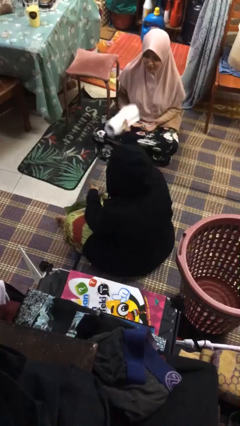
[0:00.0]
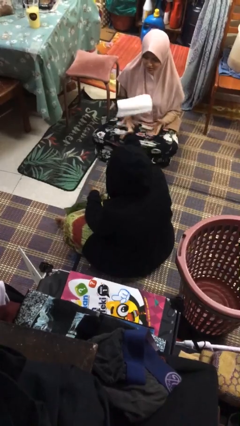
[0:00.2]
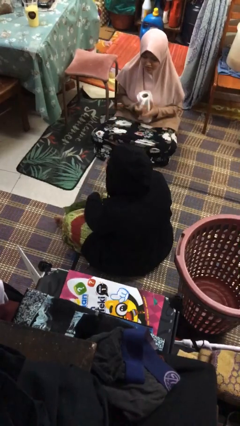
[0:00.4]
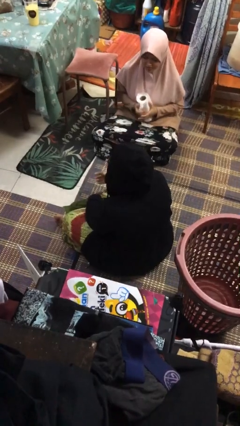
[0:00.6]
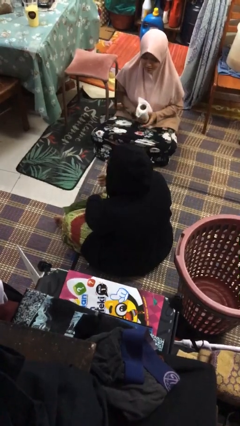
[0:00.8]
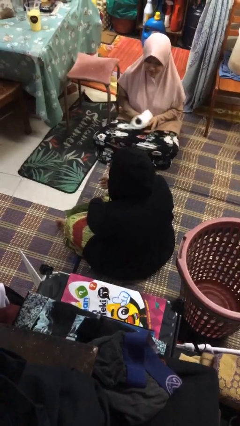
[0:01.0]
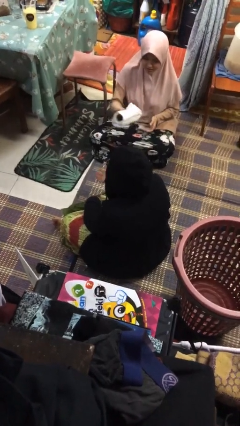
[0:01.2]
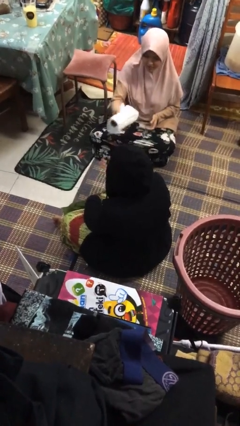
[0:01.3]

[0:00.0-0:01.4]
person throws object to person

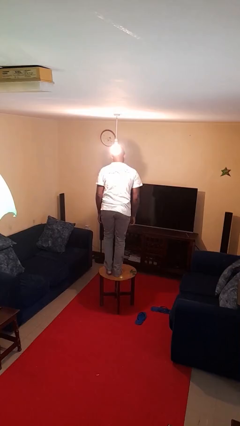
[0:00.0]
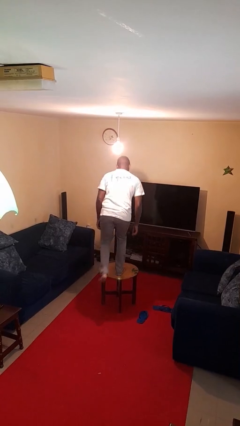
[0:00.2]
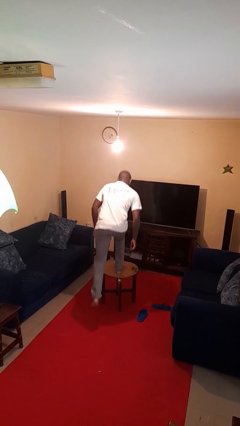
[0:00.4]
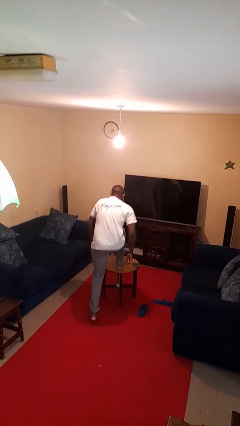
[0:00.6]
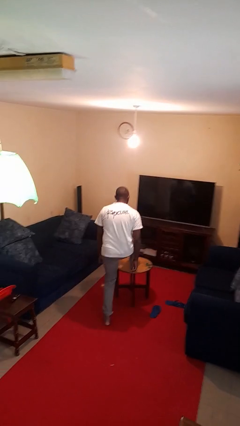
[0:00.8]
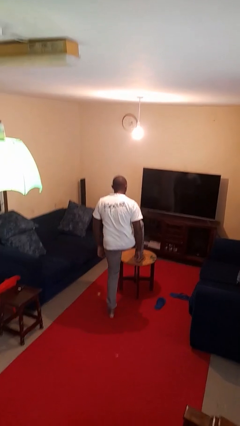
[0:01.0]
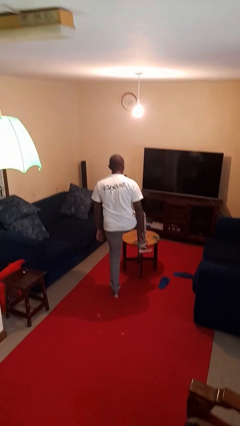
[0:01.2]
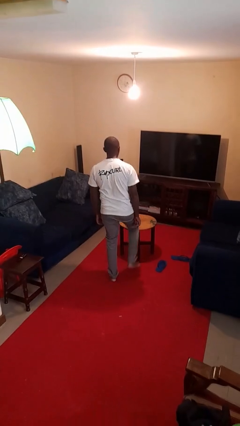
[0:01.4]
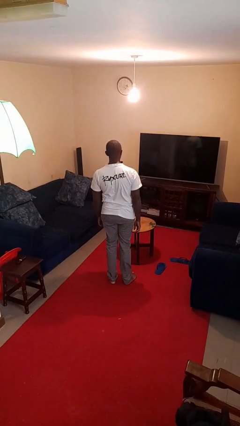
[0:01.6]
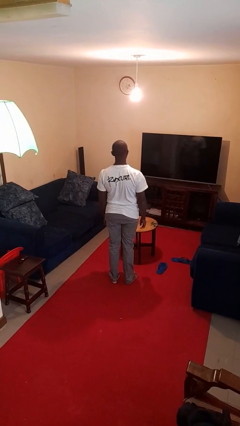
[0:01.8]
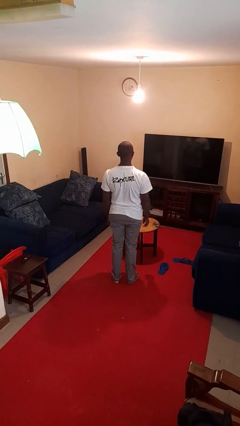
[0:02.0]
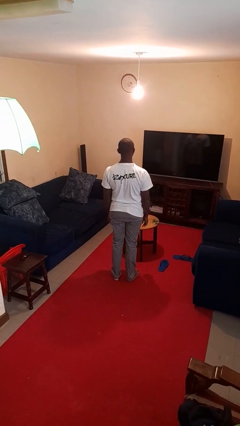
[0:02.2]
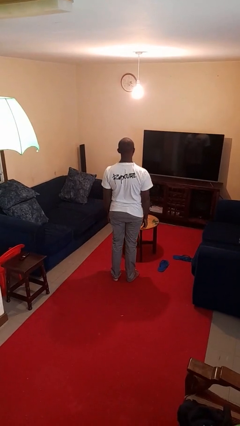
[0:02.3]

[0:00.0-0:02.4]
person climbs off table

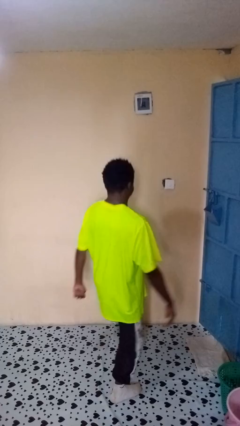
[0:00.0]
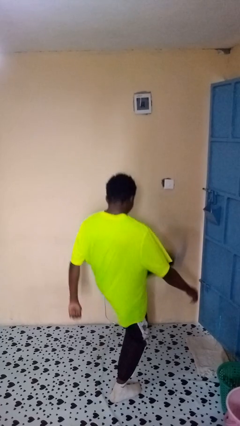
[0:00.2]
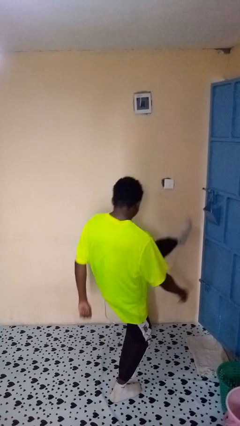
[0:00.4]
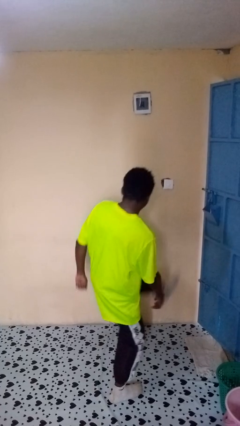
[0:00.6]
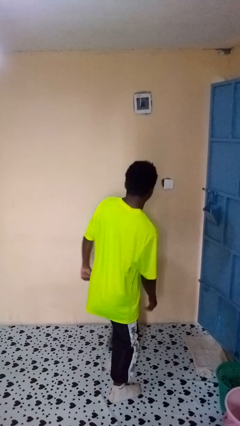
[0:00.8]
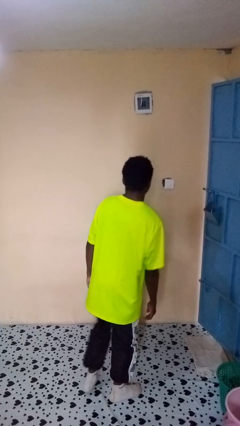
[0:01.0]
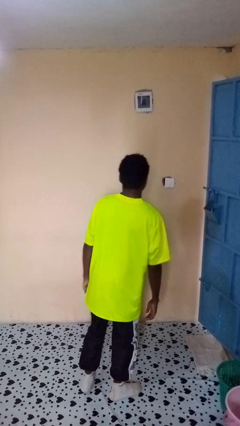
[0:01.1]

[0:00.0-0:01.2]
person karate kicks

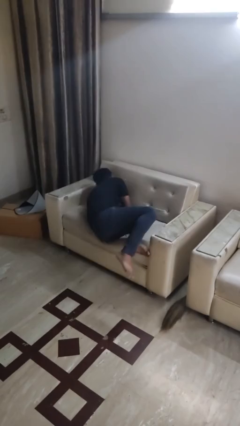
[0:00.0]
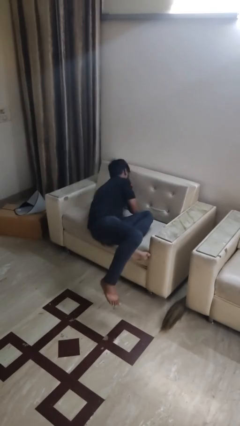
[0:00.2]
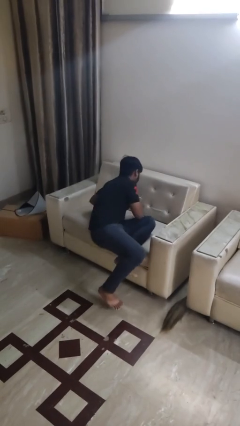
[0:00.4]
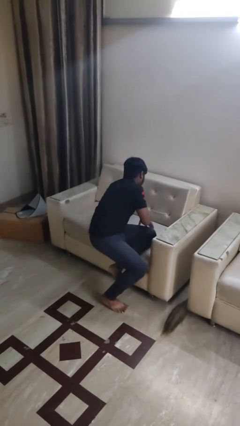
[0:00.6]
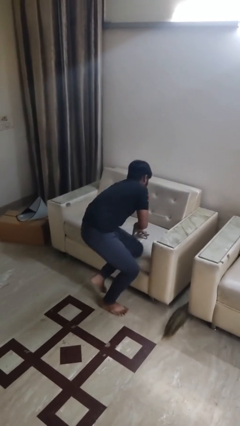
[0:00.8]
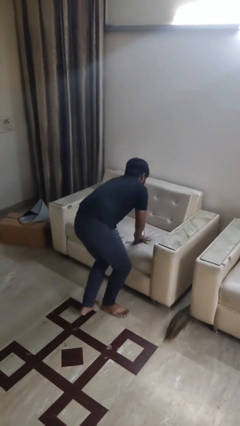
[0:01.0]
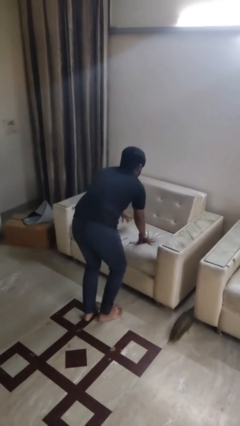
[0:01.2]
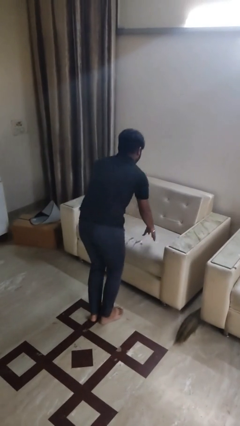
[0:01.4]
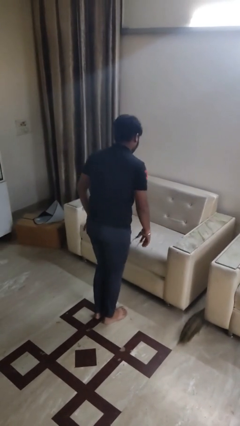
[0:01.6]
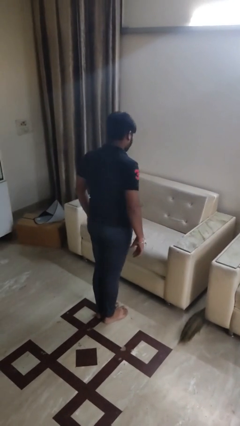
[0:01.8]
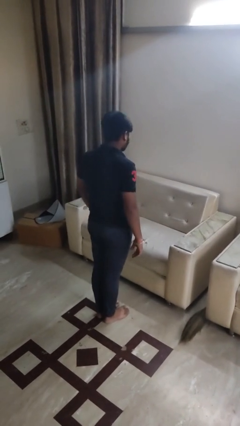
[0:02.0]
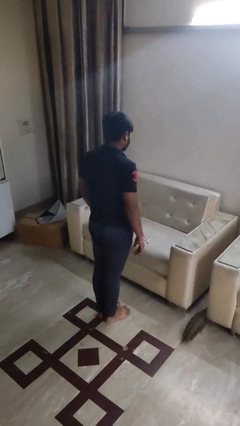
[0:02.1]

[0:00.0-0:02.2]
person stands up

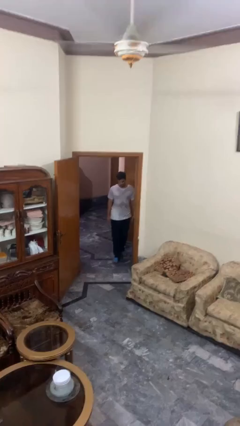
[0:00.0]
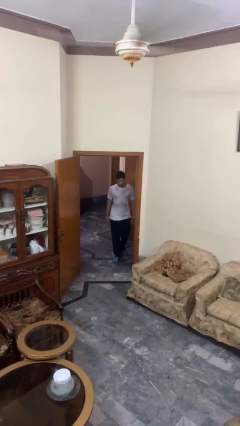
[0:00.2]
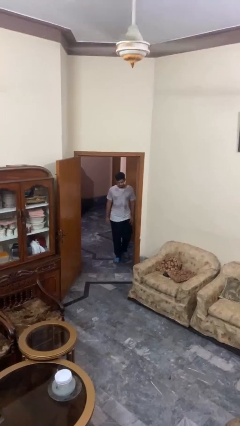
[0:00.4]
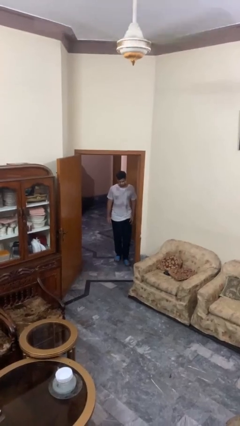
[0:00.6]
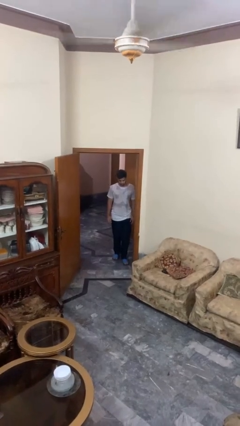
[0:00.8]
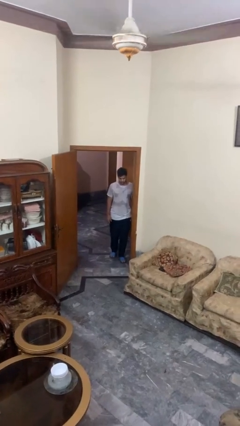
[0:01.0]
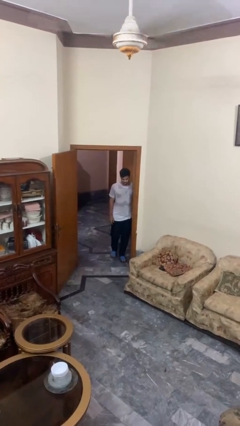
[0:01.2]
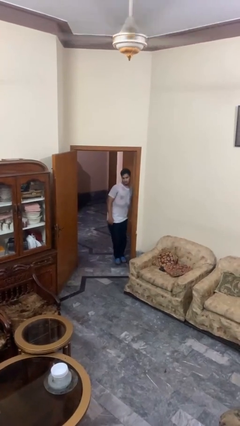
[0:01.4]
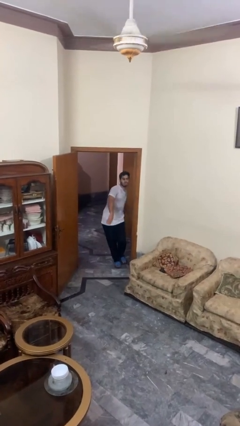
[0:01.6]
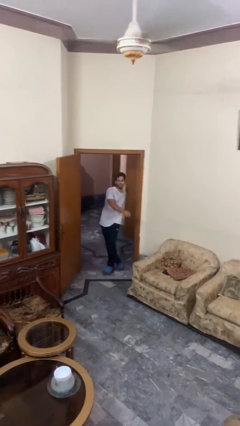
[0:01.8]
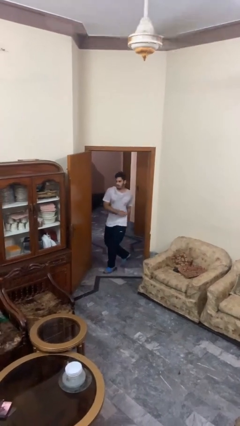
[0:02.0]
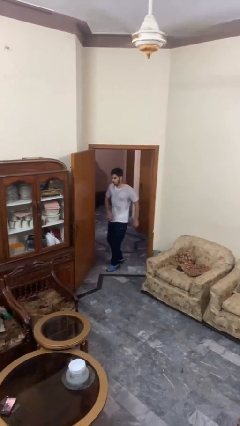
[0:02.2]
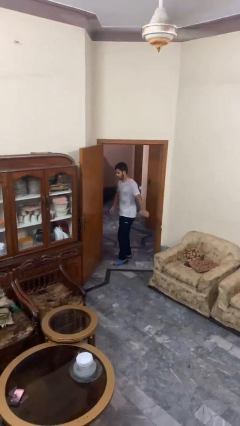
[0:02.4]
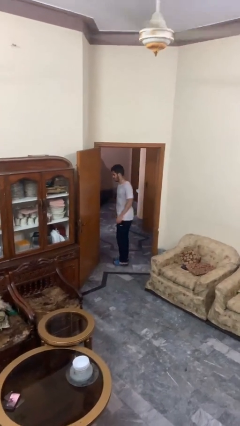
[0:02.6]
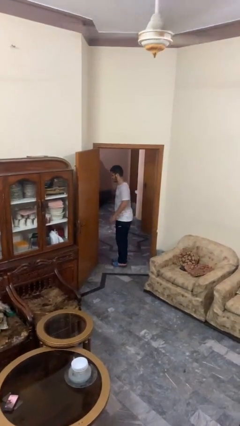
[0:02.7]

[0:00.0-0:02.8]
person bumps into wall

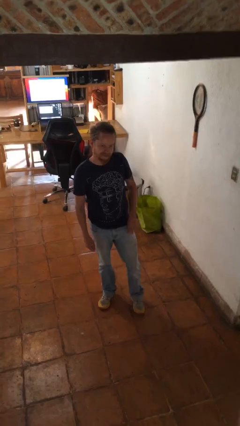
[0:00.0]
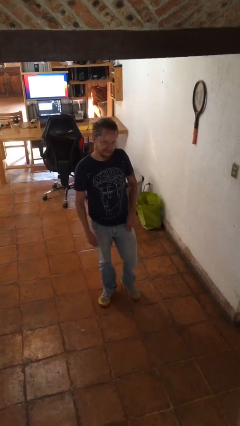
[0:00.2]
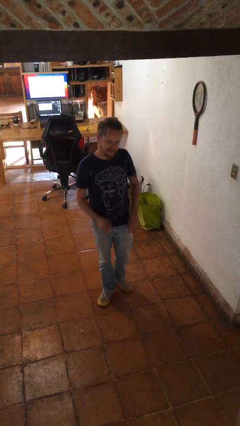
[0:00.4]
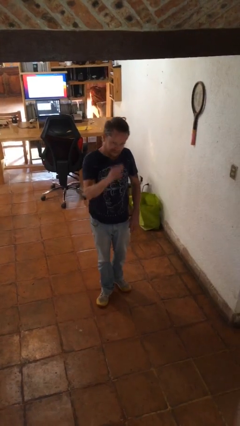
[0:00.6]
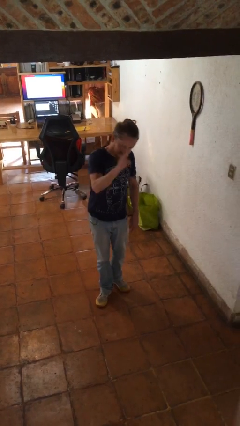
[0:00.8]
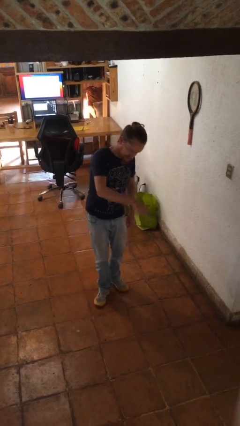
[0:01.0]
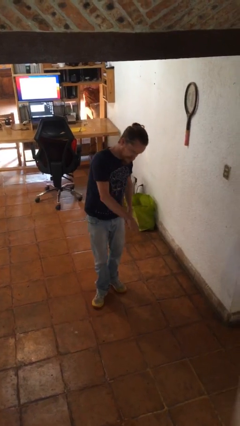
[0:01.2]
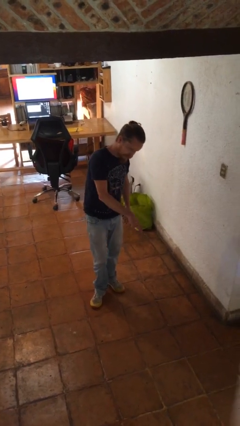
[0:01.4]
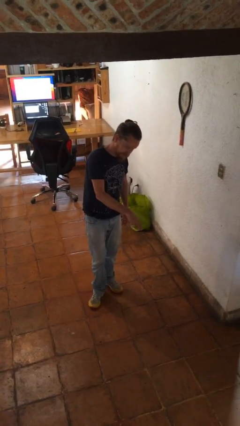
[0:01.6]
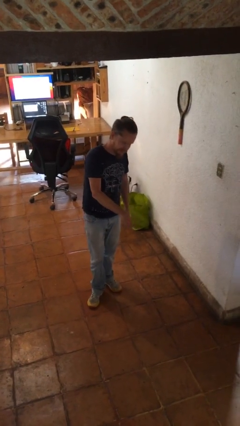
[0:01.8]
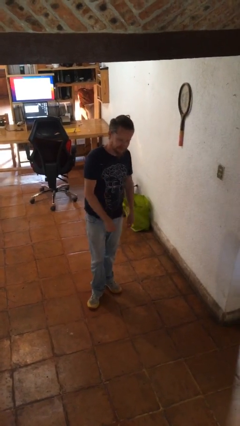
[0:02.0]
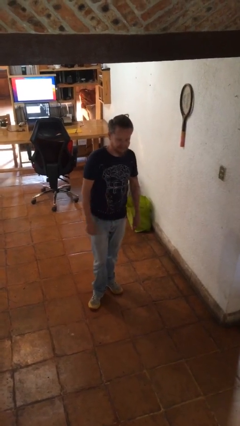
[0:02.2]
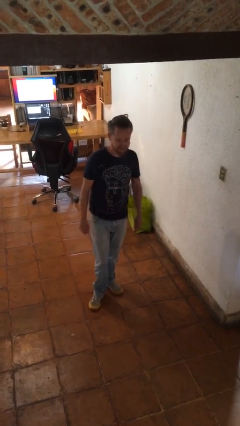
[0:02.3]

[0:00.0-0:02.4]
person gestures swipe down

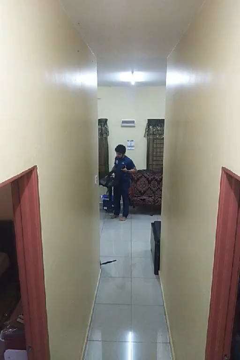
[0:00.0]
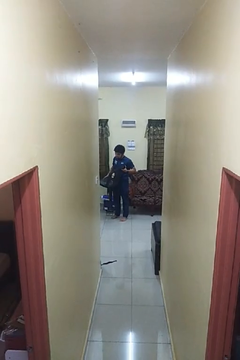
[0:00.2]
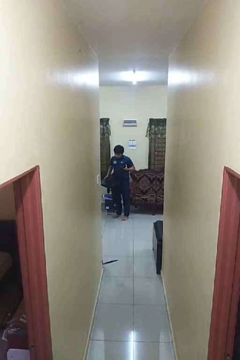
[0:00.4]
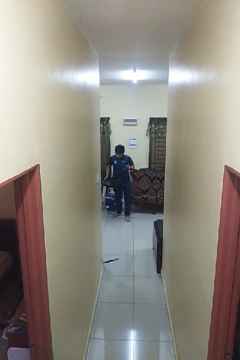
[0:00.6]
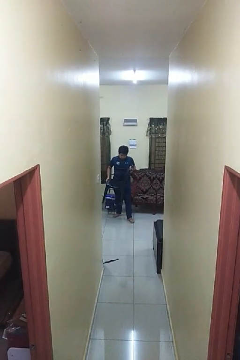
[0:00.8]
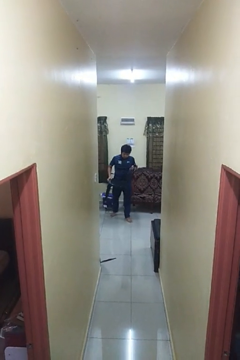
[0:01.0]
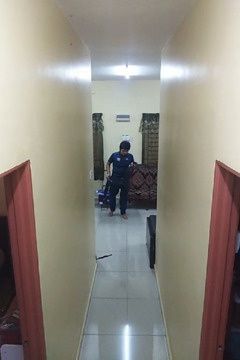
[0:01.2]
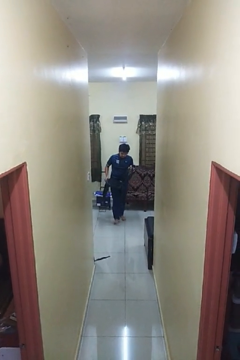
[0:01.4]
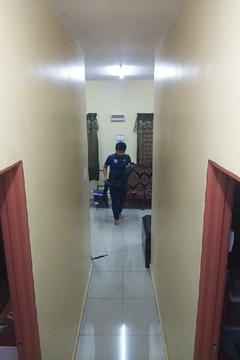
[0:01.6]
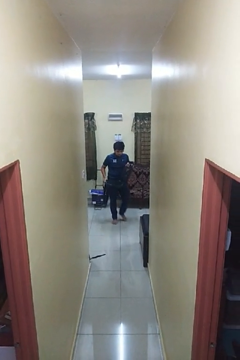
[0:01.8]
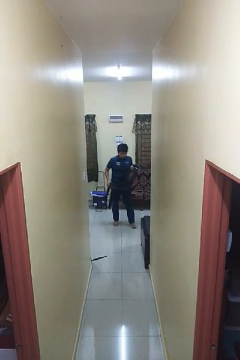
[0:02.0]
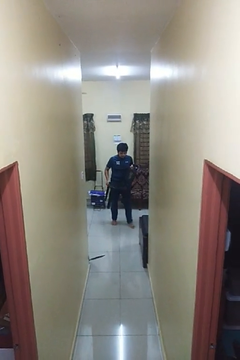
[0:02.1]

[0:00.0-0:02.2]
person carries furniture

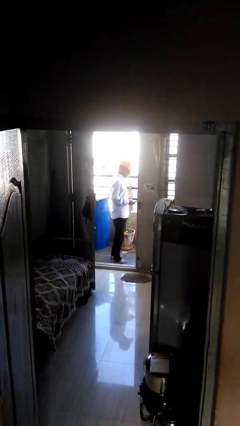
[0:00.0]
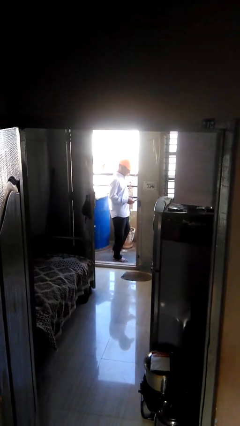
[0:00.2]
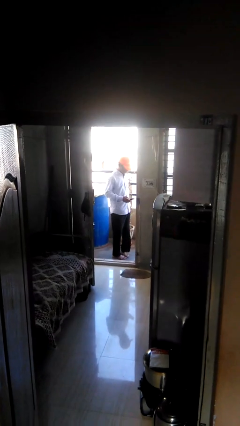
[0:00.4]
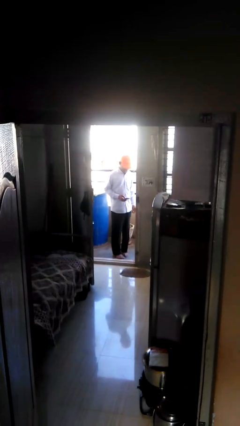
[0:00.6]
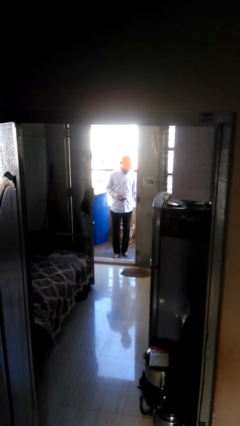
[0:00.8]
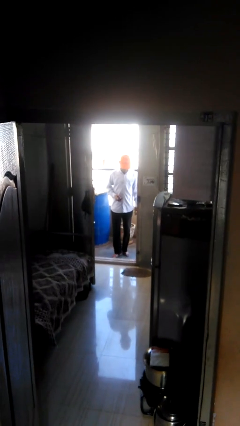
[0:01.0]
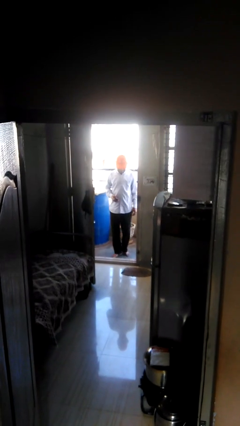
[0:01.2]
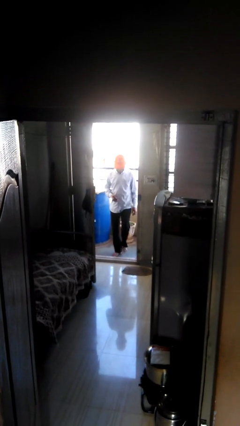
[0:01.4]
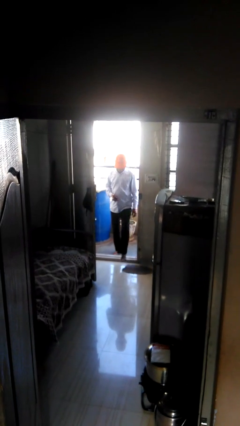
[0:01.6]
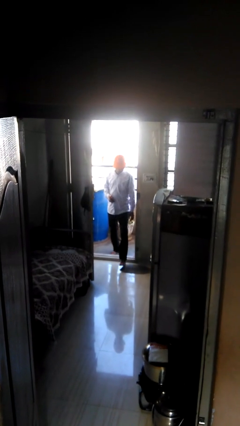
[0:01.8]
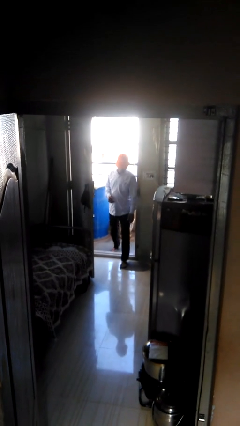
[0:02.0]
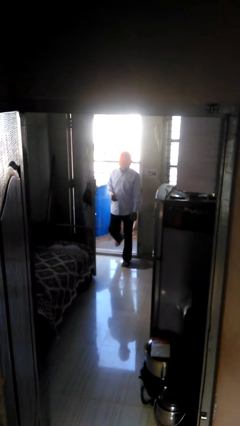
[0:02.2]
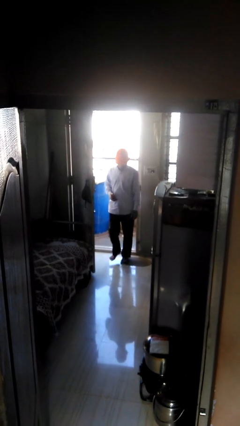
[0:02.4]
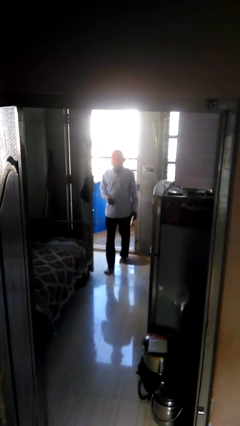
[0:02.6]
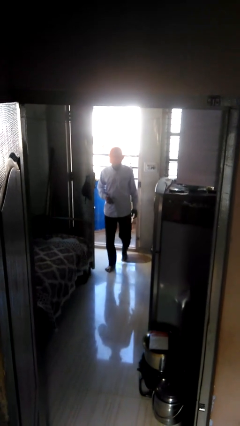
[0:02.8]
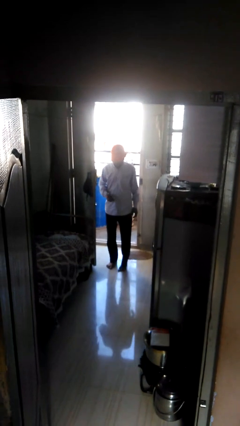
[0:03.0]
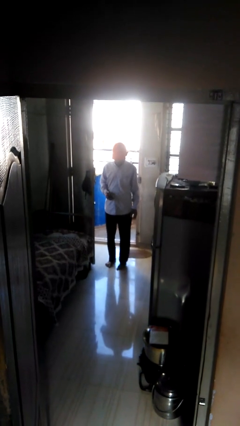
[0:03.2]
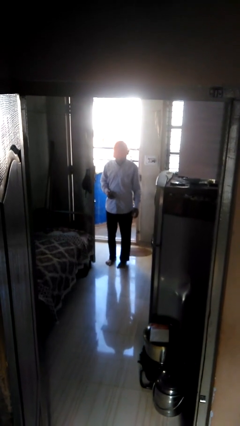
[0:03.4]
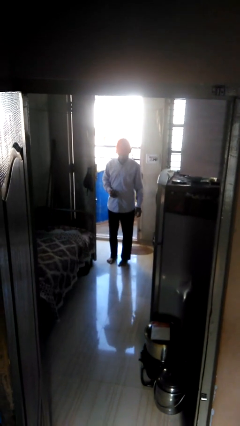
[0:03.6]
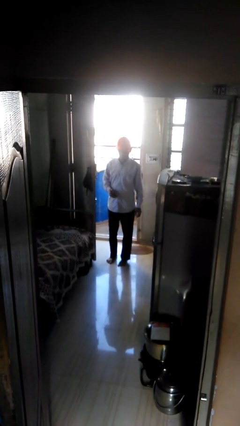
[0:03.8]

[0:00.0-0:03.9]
person enters scene through structure
